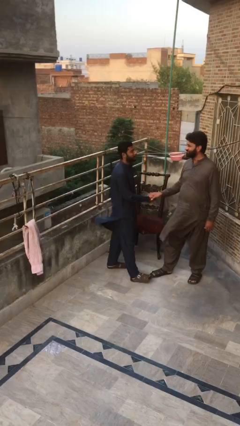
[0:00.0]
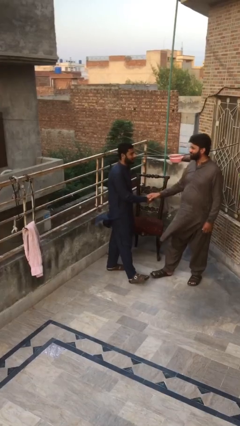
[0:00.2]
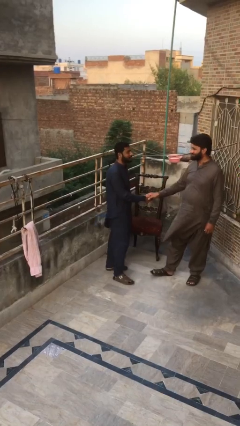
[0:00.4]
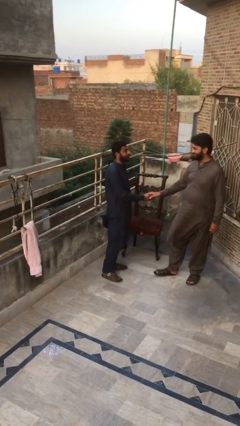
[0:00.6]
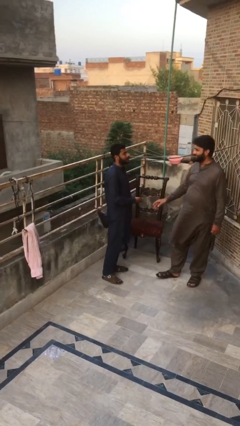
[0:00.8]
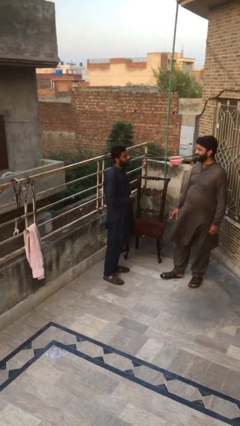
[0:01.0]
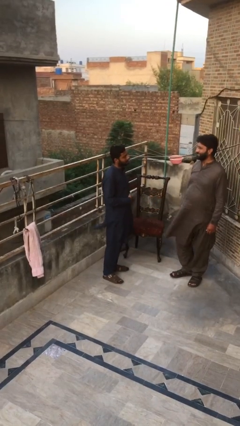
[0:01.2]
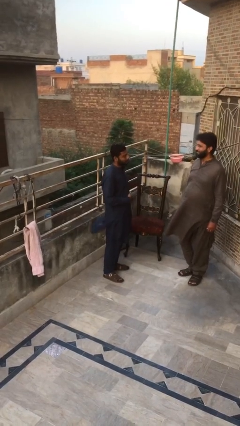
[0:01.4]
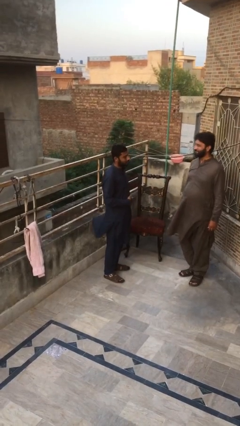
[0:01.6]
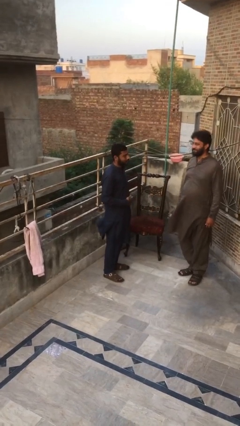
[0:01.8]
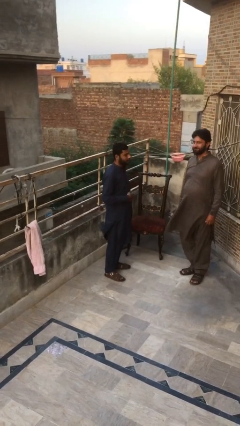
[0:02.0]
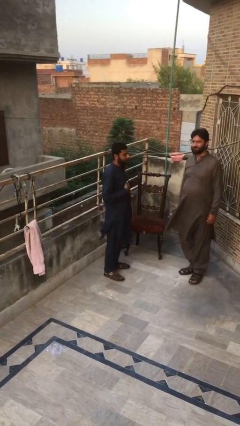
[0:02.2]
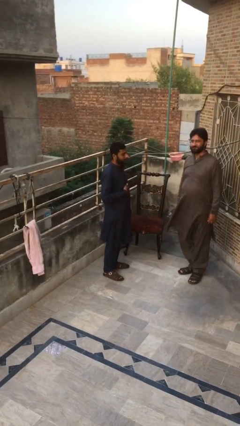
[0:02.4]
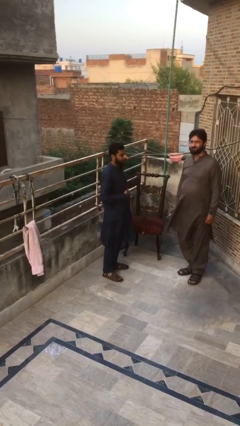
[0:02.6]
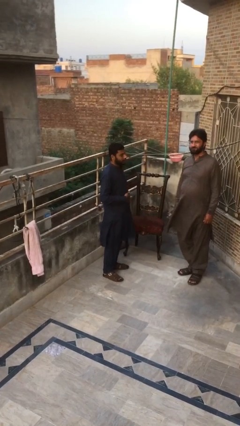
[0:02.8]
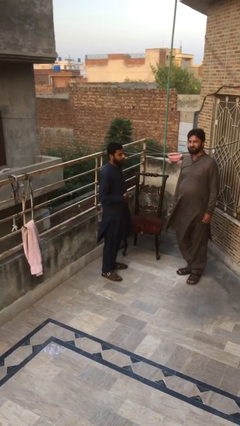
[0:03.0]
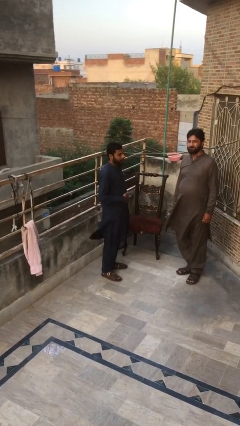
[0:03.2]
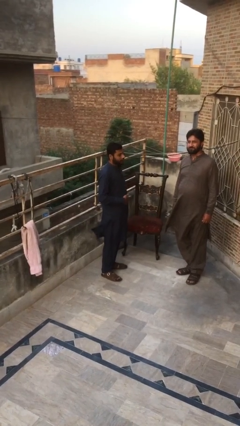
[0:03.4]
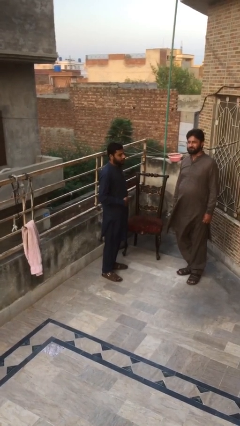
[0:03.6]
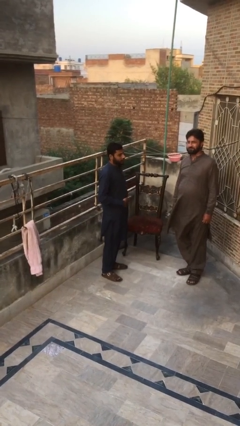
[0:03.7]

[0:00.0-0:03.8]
person talks to person

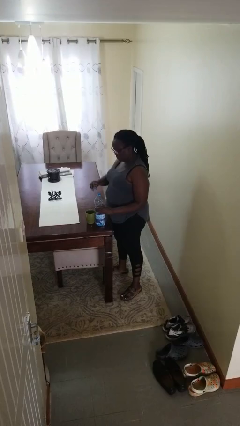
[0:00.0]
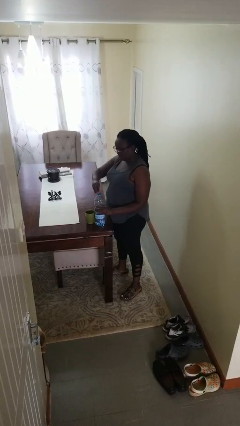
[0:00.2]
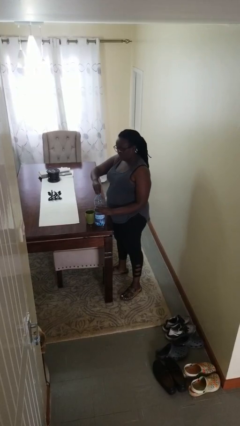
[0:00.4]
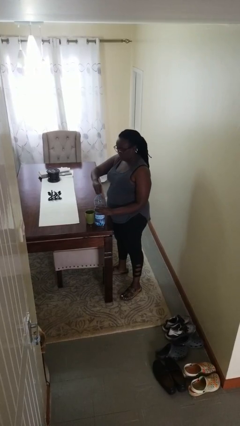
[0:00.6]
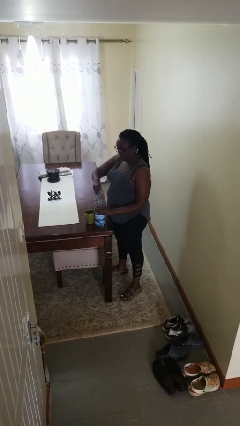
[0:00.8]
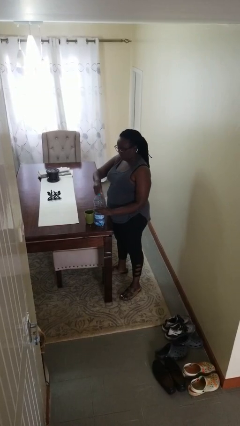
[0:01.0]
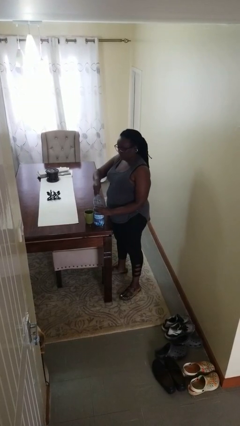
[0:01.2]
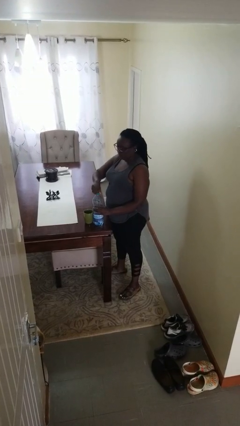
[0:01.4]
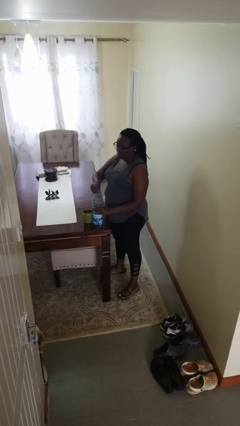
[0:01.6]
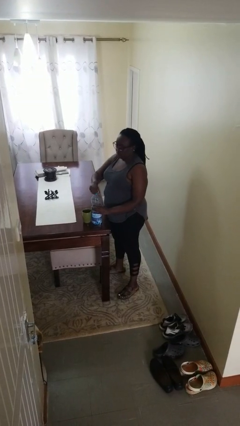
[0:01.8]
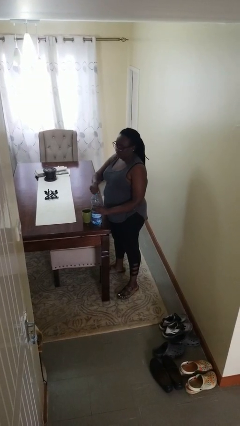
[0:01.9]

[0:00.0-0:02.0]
person screws lid to bottle

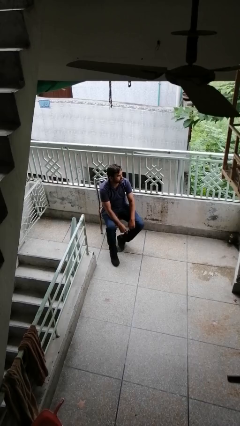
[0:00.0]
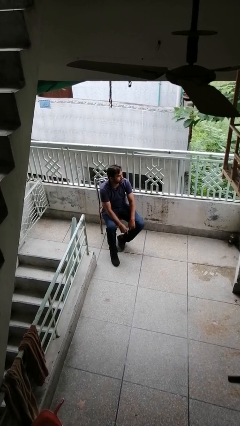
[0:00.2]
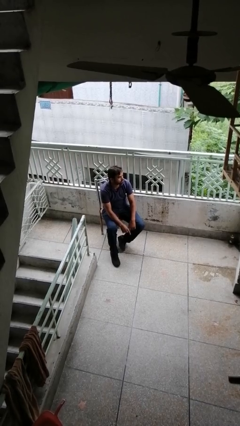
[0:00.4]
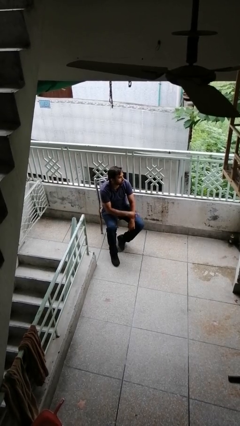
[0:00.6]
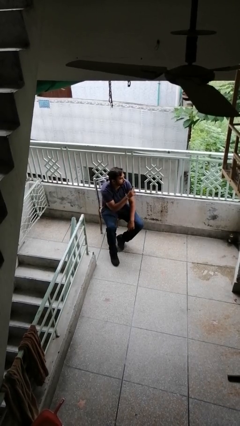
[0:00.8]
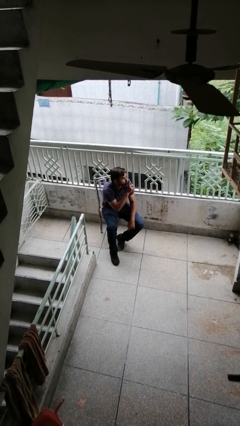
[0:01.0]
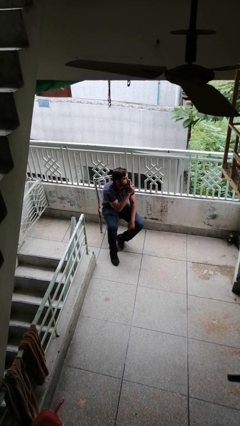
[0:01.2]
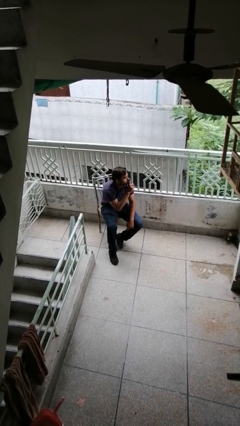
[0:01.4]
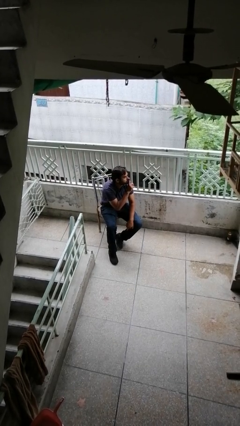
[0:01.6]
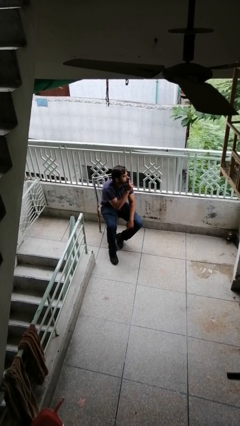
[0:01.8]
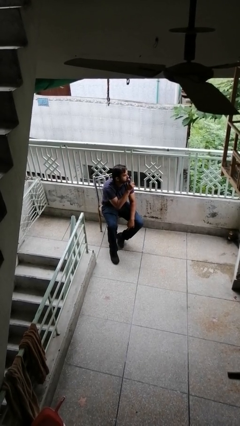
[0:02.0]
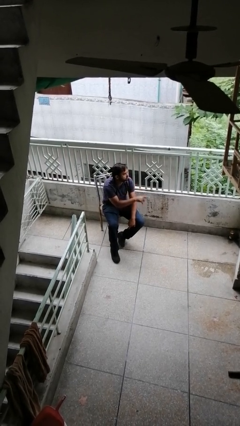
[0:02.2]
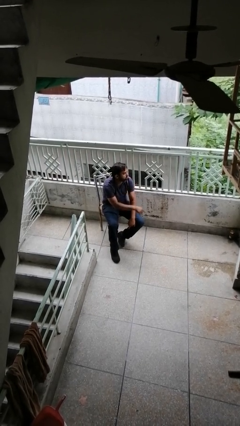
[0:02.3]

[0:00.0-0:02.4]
person gestures be quiet

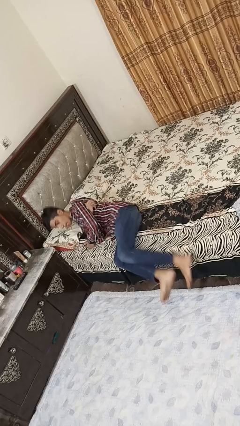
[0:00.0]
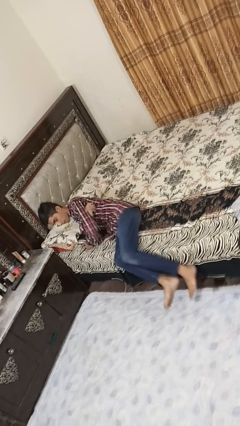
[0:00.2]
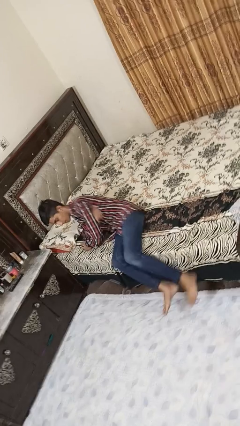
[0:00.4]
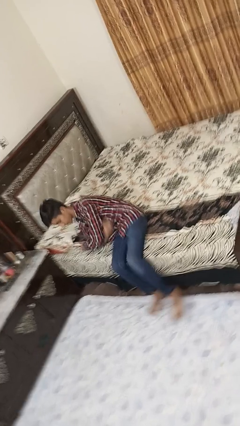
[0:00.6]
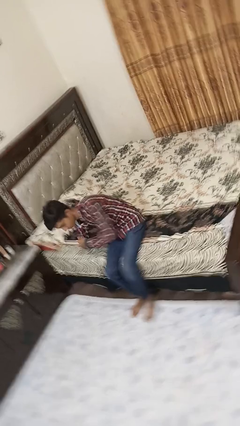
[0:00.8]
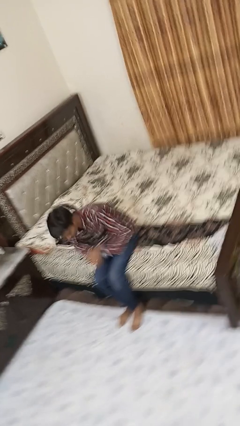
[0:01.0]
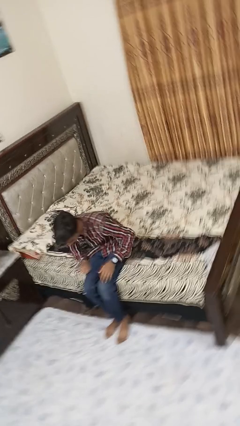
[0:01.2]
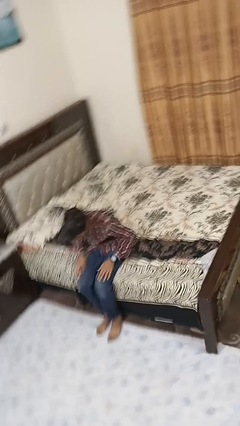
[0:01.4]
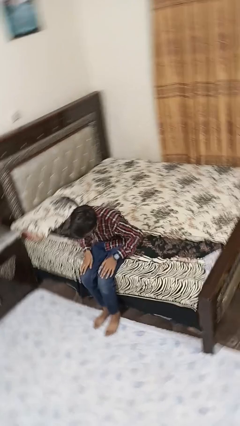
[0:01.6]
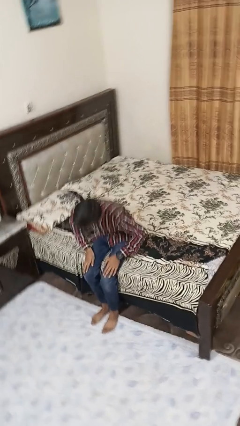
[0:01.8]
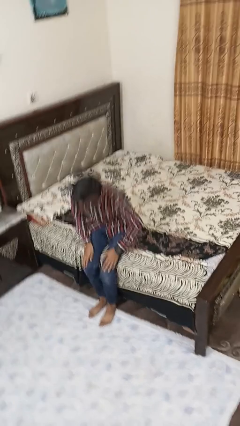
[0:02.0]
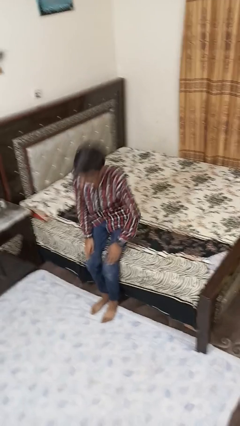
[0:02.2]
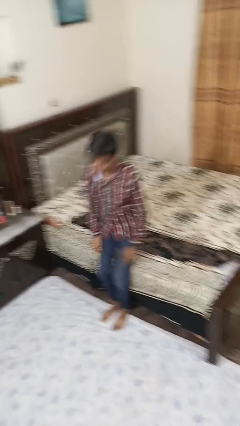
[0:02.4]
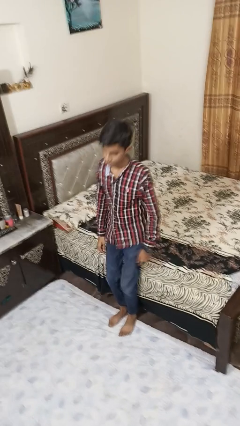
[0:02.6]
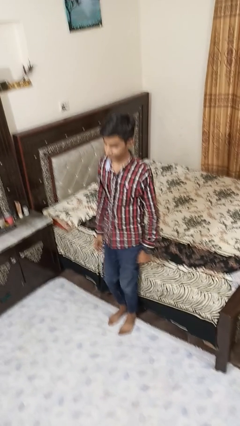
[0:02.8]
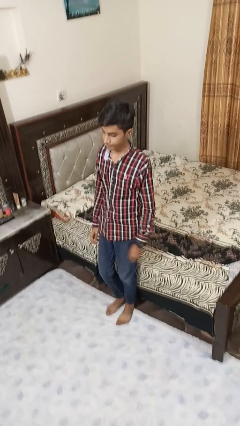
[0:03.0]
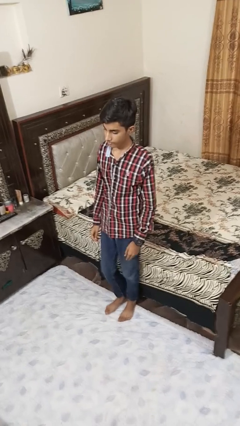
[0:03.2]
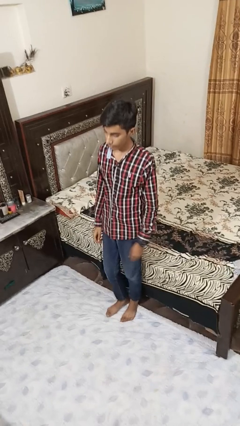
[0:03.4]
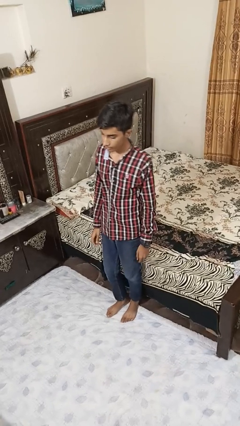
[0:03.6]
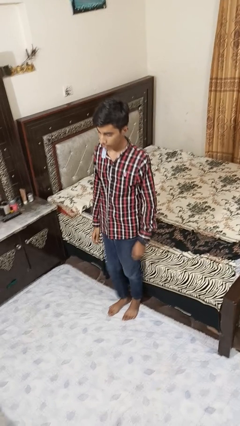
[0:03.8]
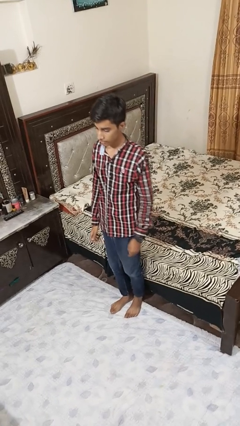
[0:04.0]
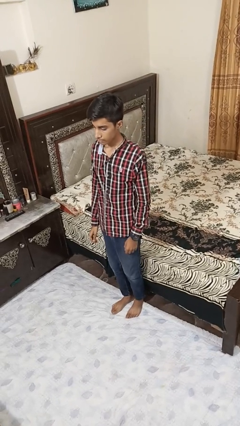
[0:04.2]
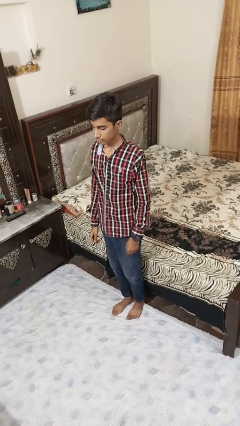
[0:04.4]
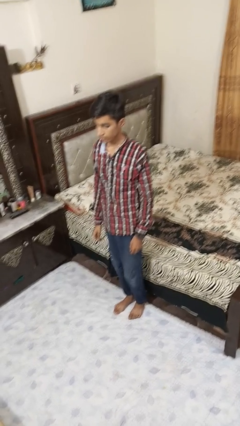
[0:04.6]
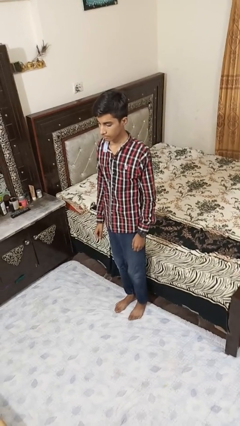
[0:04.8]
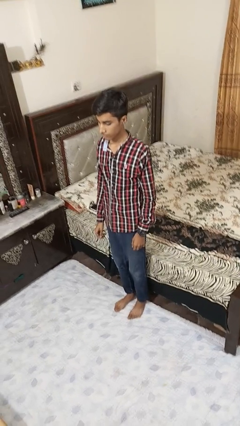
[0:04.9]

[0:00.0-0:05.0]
person stands up

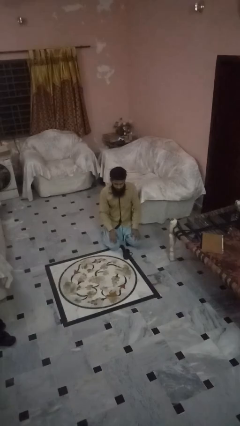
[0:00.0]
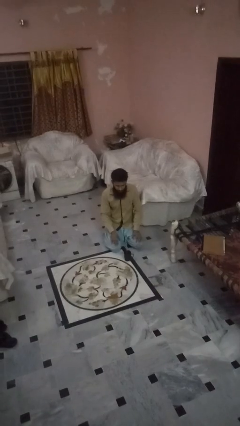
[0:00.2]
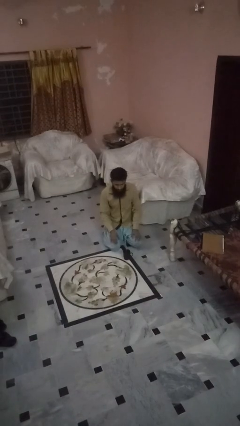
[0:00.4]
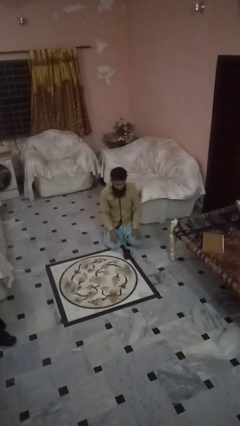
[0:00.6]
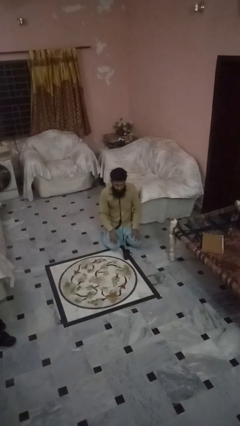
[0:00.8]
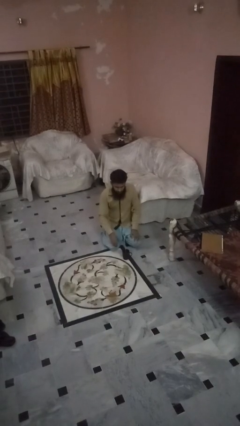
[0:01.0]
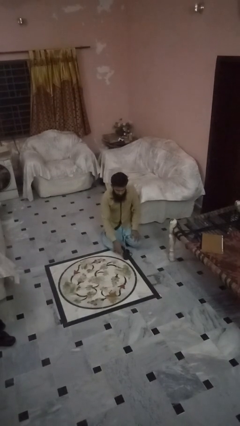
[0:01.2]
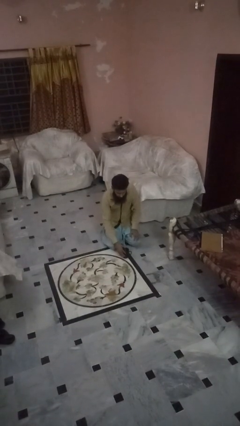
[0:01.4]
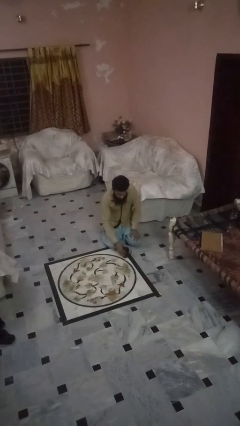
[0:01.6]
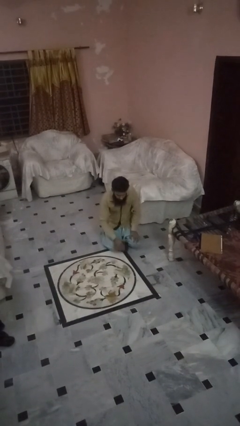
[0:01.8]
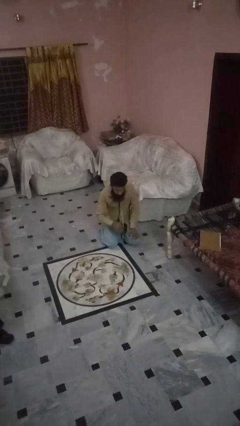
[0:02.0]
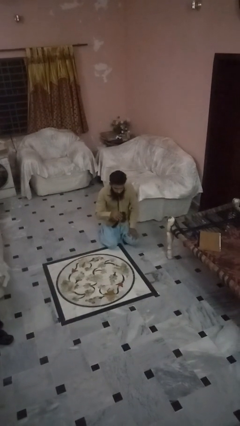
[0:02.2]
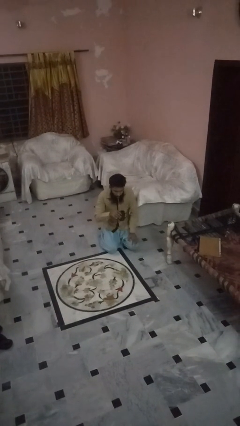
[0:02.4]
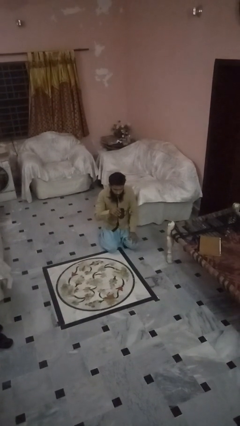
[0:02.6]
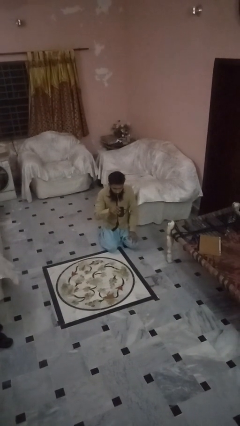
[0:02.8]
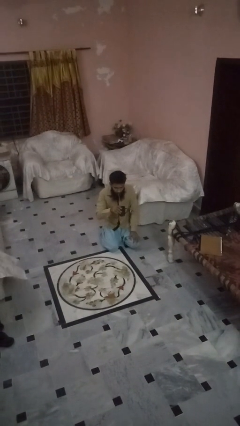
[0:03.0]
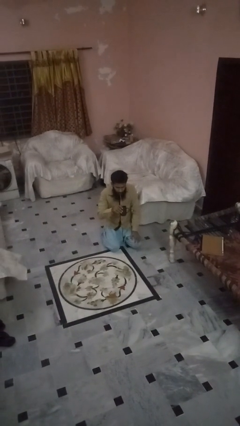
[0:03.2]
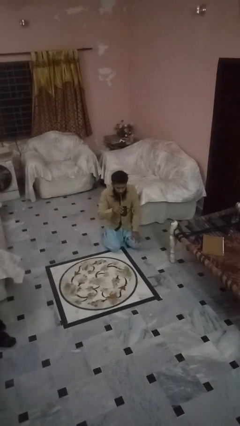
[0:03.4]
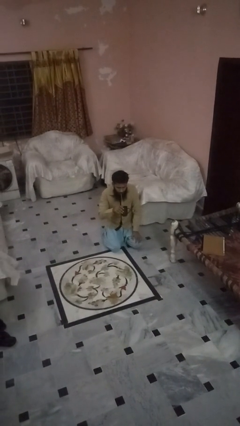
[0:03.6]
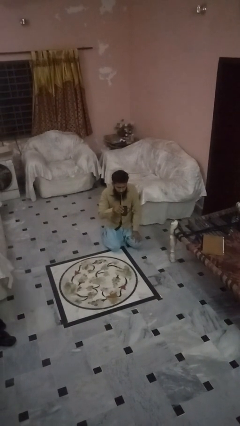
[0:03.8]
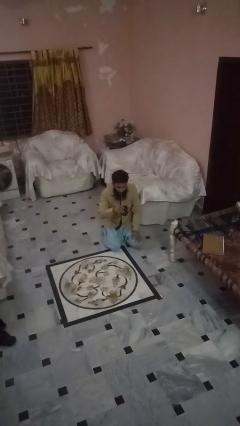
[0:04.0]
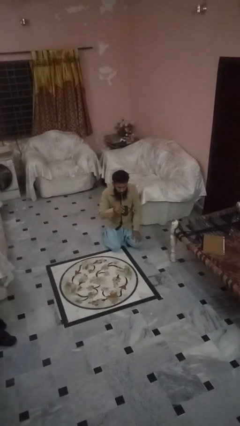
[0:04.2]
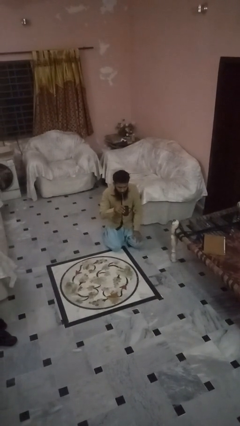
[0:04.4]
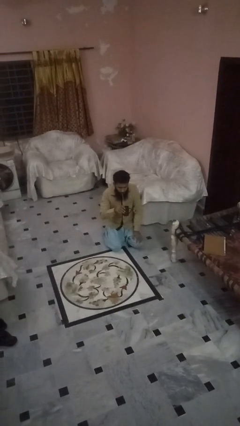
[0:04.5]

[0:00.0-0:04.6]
person drinks from straw
